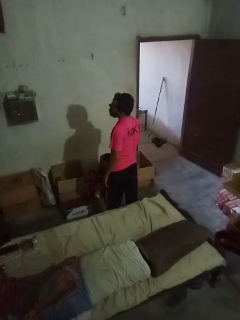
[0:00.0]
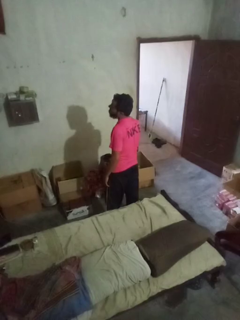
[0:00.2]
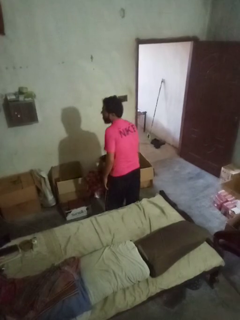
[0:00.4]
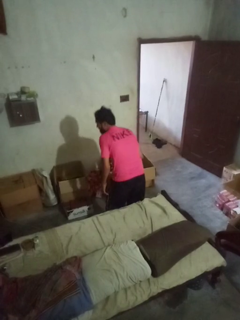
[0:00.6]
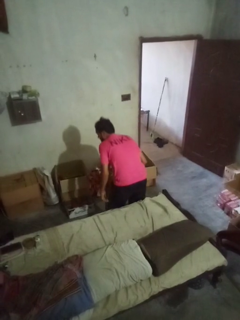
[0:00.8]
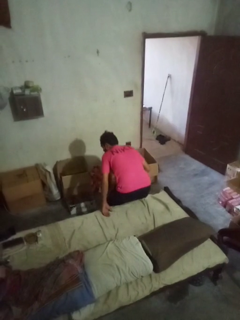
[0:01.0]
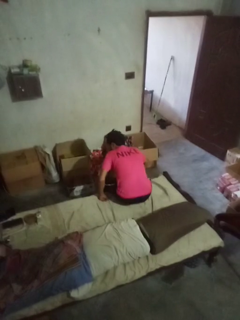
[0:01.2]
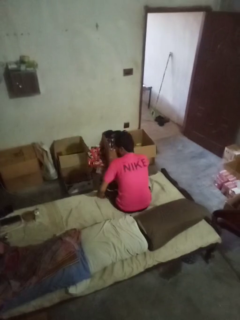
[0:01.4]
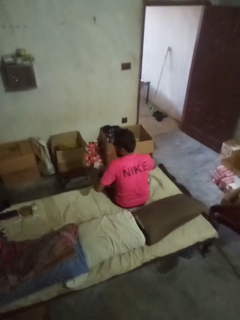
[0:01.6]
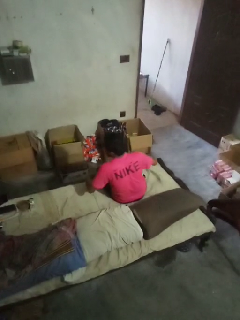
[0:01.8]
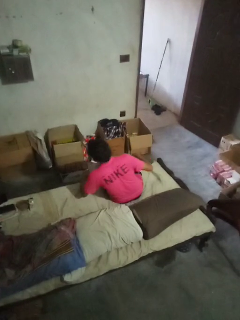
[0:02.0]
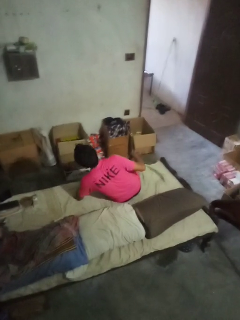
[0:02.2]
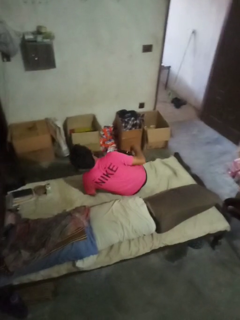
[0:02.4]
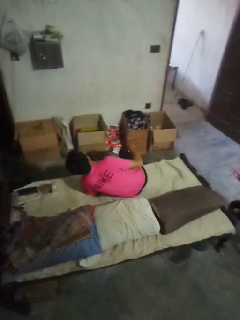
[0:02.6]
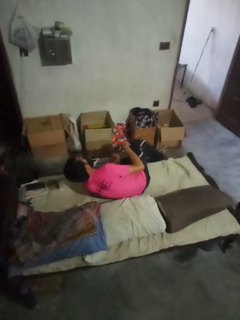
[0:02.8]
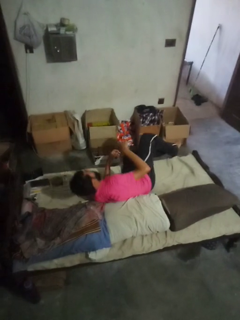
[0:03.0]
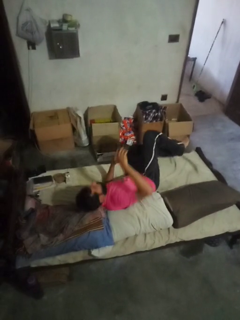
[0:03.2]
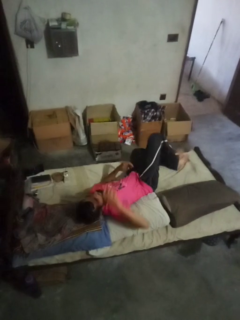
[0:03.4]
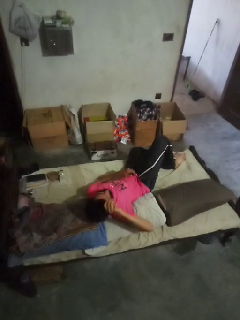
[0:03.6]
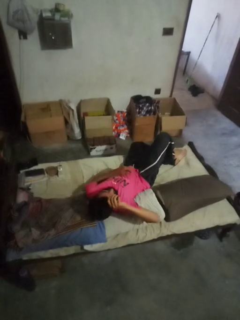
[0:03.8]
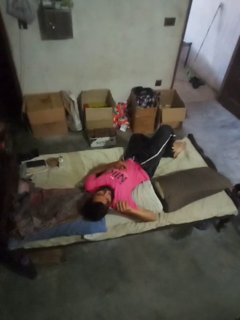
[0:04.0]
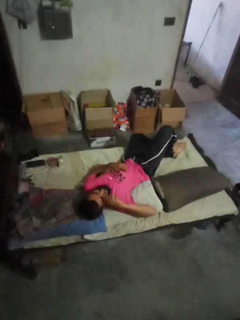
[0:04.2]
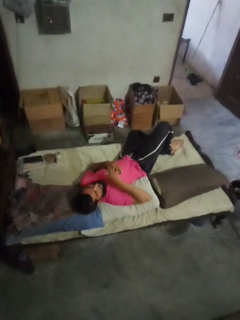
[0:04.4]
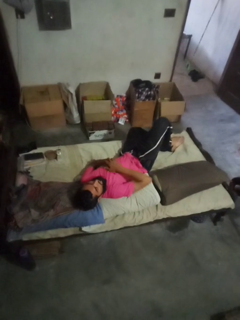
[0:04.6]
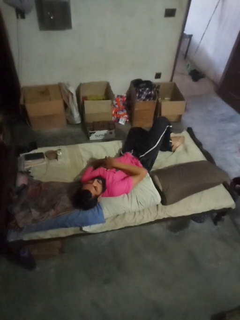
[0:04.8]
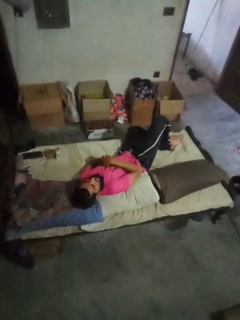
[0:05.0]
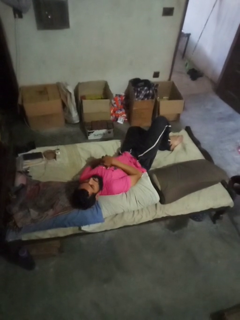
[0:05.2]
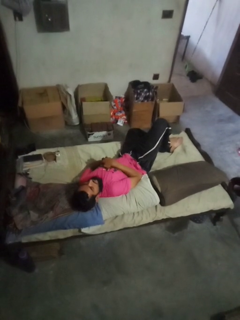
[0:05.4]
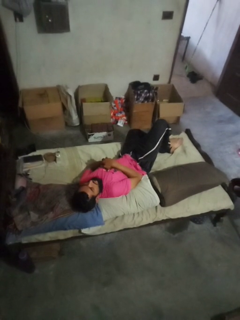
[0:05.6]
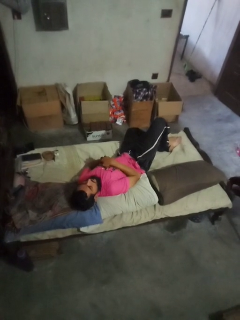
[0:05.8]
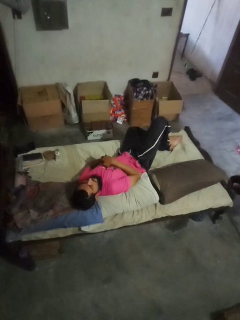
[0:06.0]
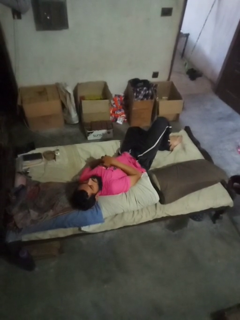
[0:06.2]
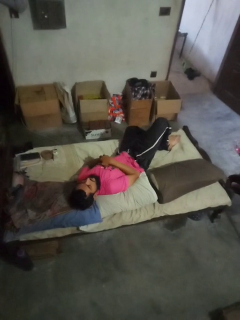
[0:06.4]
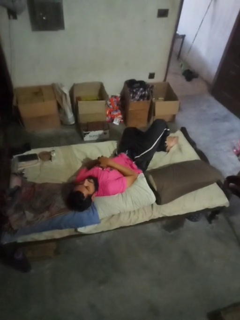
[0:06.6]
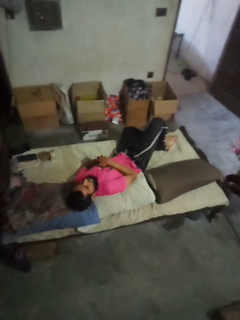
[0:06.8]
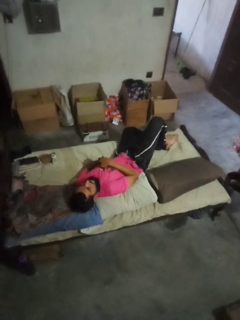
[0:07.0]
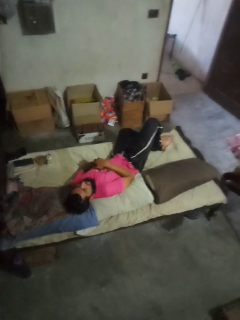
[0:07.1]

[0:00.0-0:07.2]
person lies down on couch

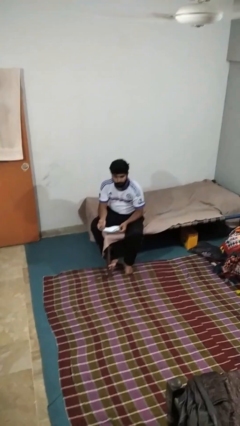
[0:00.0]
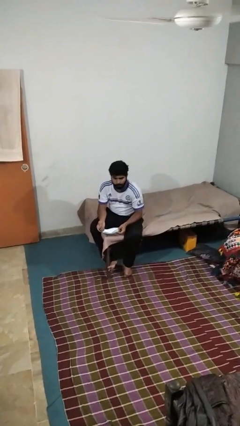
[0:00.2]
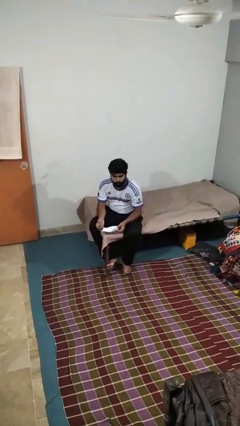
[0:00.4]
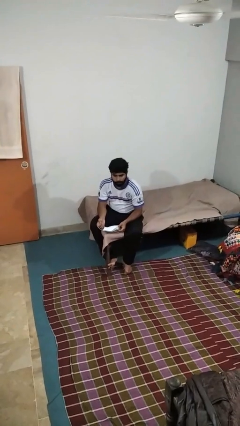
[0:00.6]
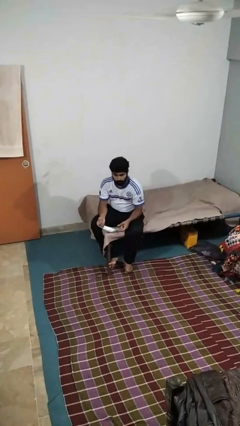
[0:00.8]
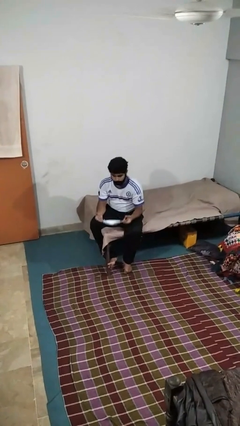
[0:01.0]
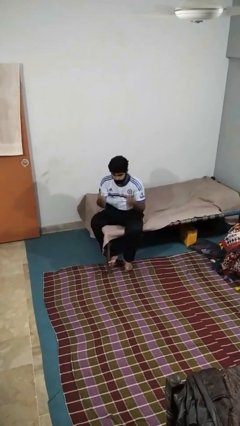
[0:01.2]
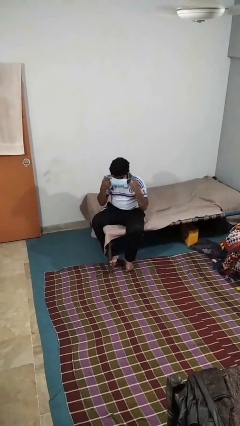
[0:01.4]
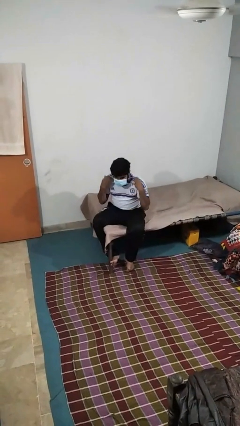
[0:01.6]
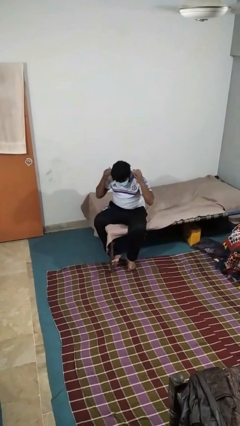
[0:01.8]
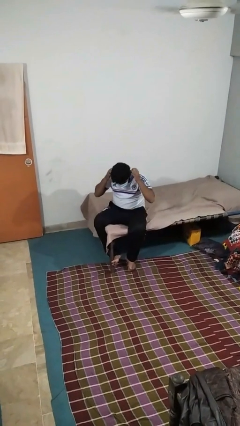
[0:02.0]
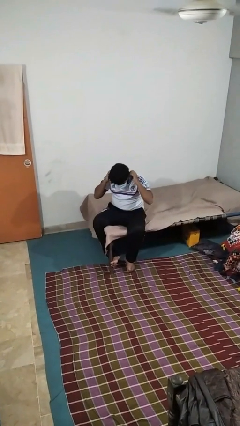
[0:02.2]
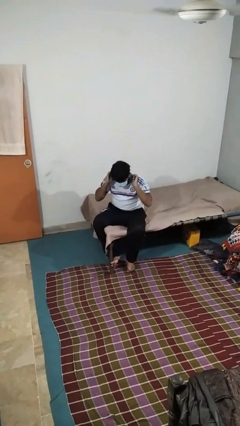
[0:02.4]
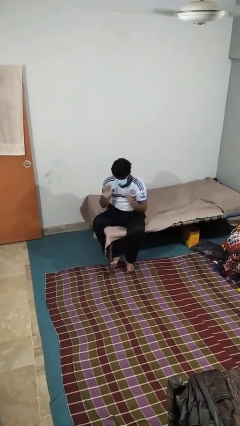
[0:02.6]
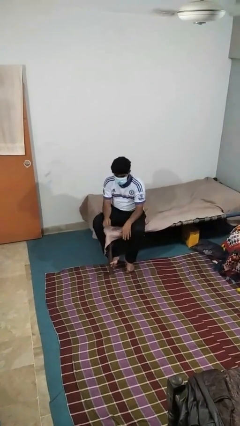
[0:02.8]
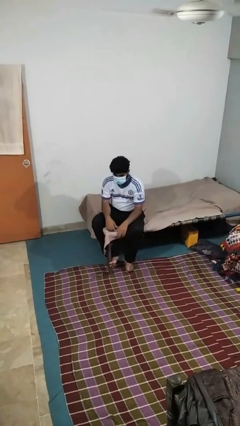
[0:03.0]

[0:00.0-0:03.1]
person puts on facemask

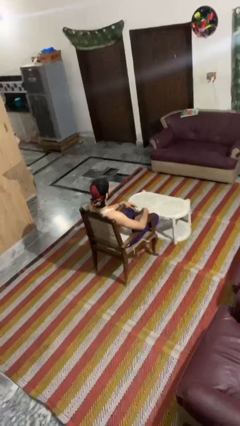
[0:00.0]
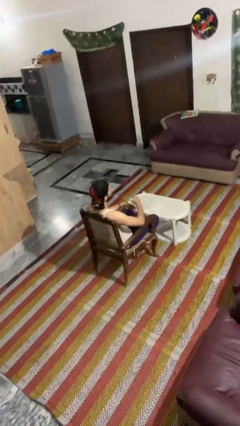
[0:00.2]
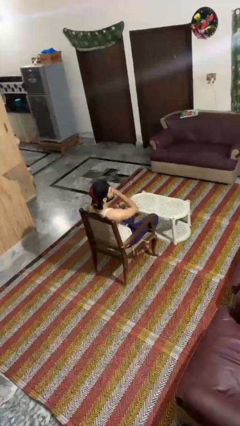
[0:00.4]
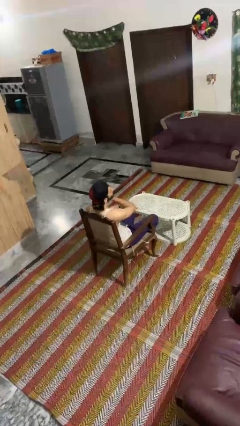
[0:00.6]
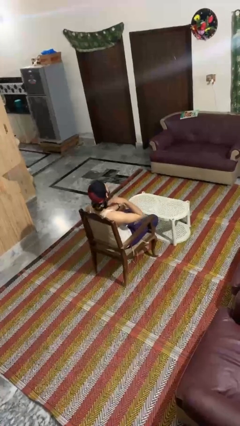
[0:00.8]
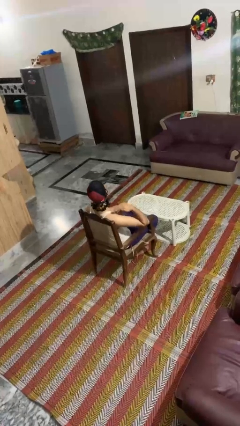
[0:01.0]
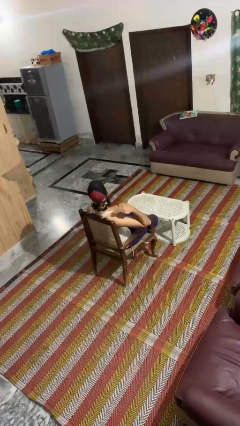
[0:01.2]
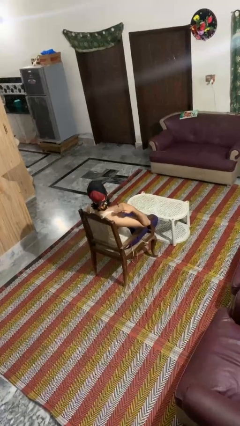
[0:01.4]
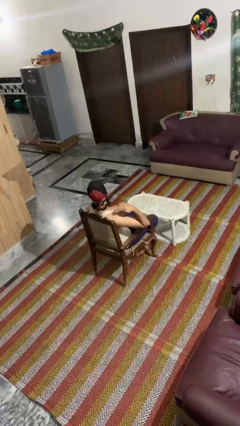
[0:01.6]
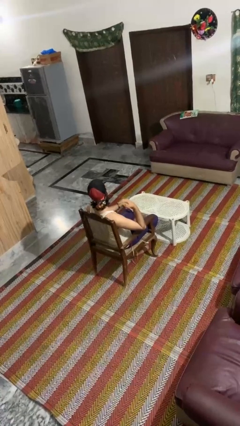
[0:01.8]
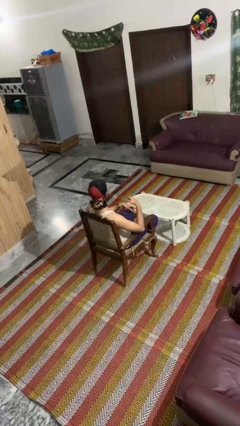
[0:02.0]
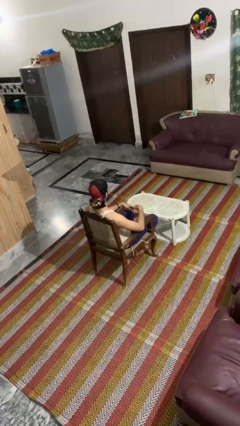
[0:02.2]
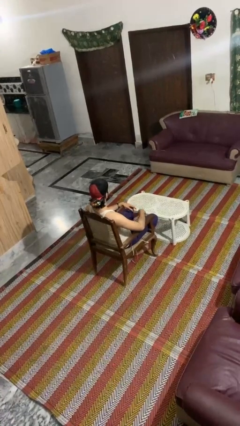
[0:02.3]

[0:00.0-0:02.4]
person gestures cut

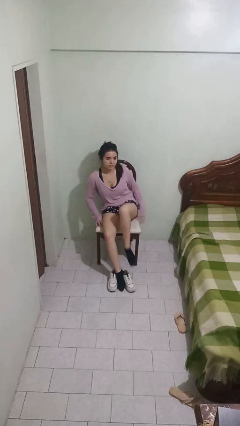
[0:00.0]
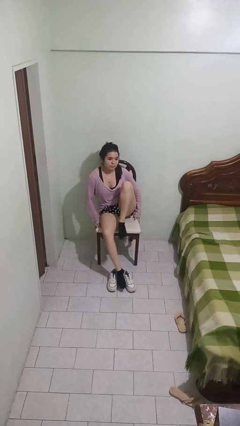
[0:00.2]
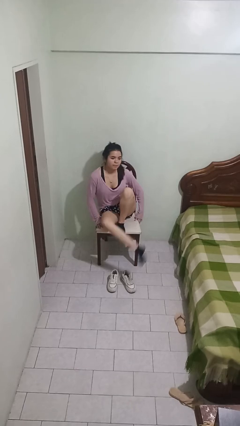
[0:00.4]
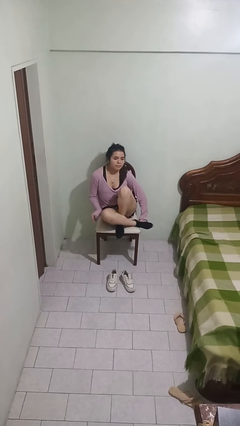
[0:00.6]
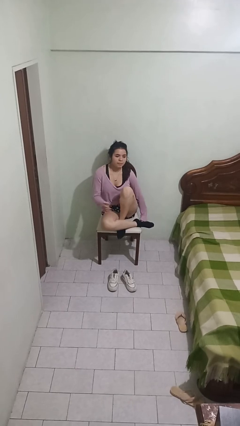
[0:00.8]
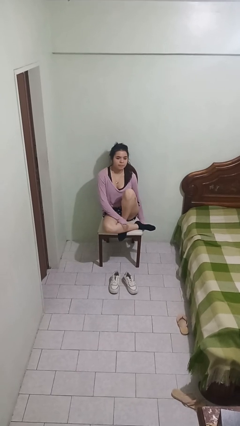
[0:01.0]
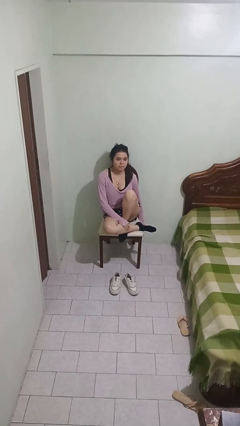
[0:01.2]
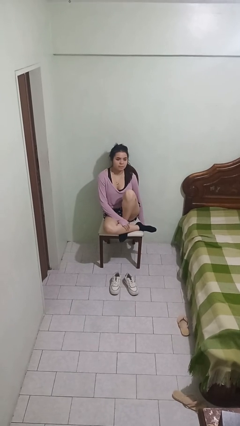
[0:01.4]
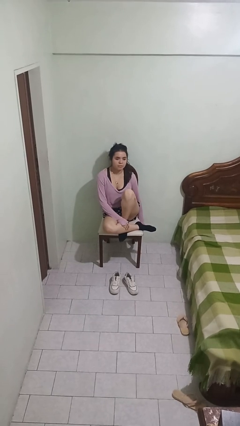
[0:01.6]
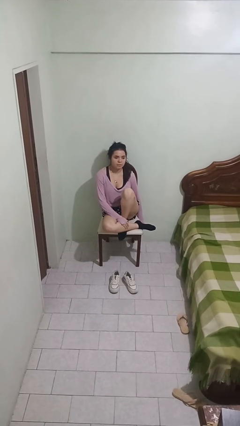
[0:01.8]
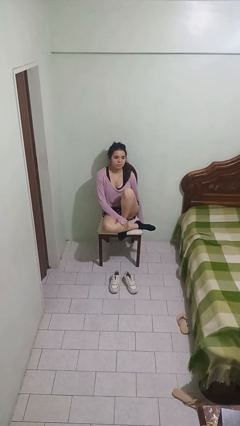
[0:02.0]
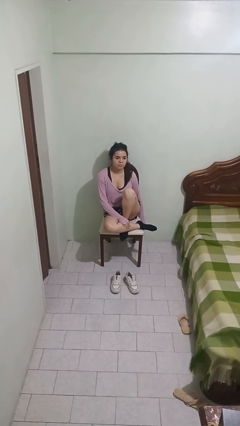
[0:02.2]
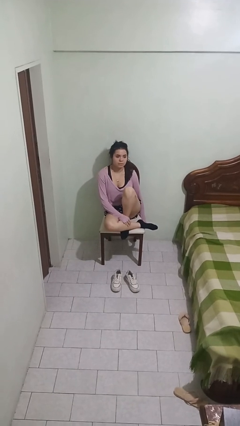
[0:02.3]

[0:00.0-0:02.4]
person puts feet up

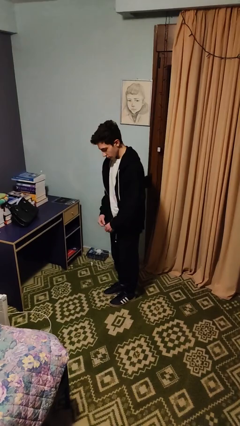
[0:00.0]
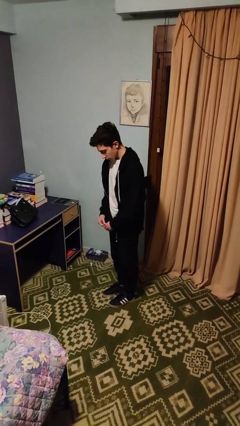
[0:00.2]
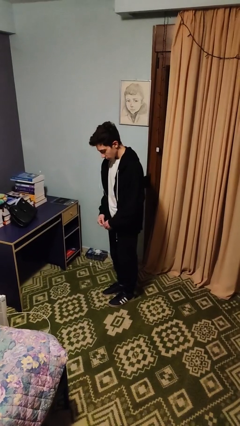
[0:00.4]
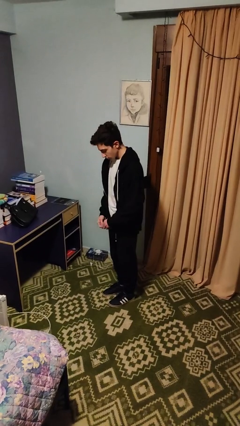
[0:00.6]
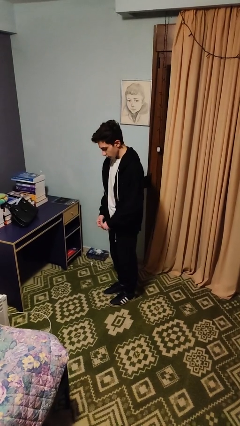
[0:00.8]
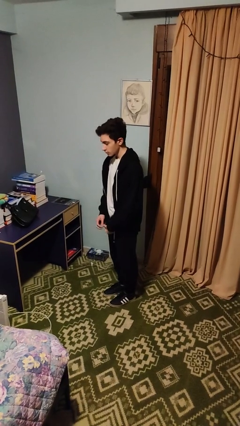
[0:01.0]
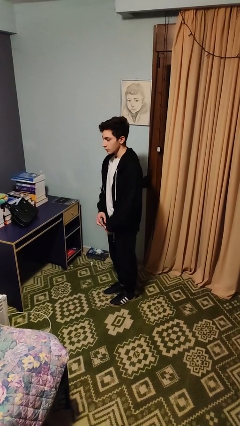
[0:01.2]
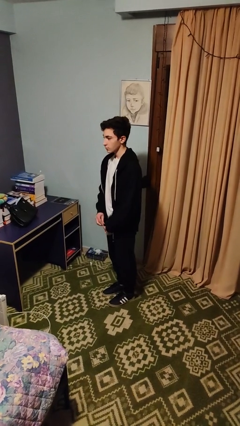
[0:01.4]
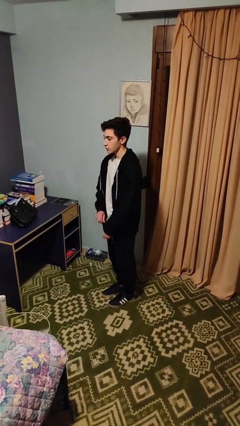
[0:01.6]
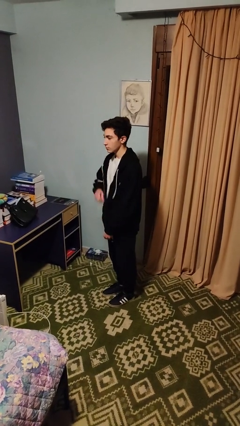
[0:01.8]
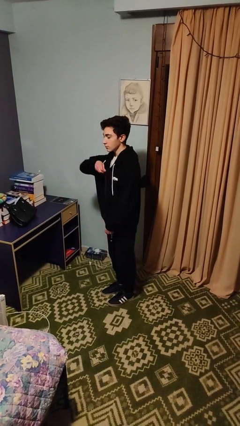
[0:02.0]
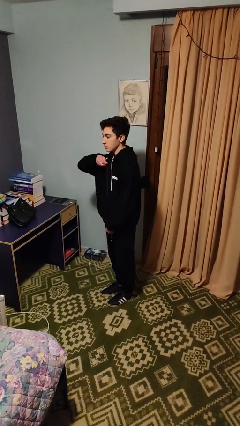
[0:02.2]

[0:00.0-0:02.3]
person zips up jacket

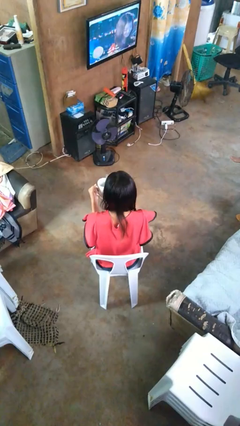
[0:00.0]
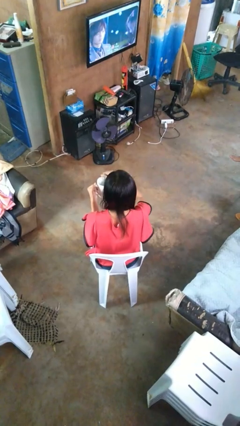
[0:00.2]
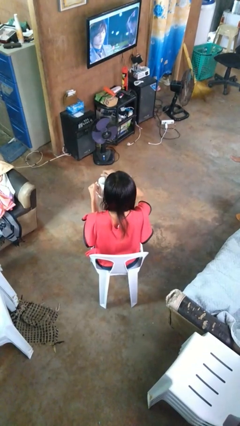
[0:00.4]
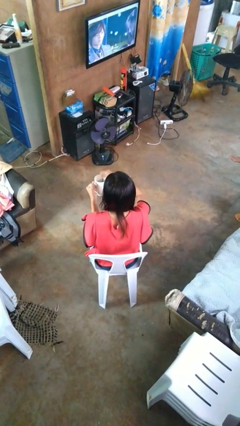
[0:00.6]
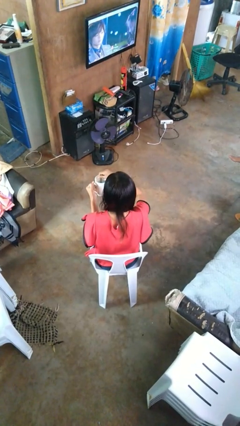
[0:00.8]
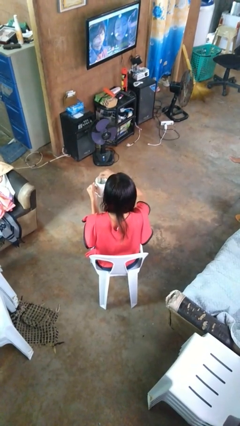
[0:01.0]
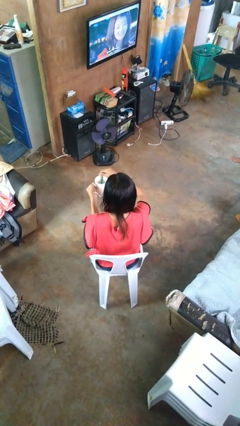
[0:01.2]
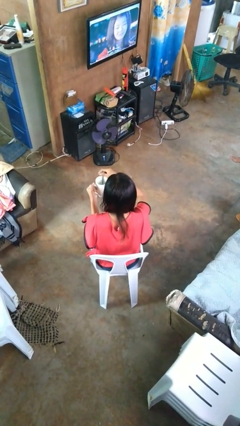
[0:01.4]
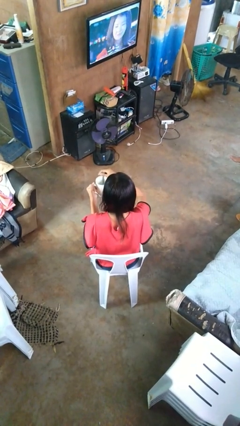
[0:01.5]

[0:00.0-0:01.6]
person stirs mug

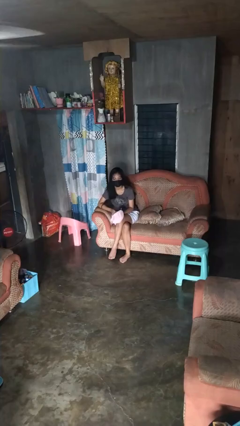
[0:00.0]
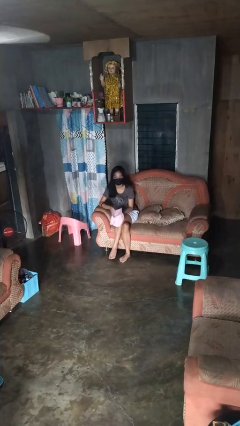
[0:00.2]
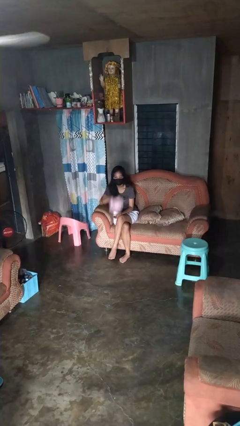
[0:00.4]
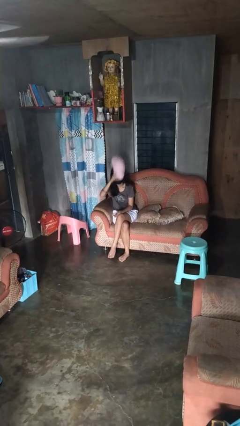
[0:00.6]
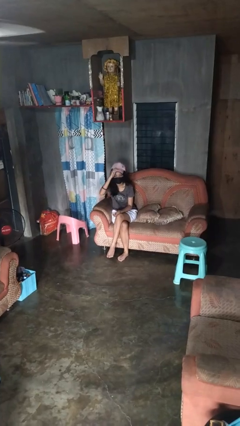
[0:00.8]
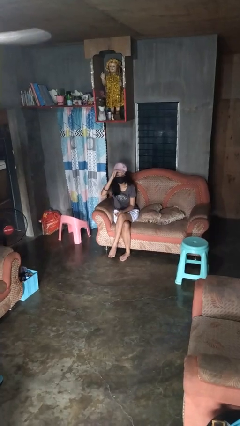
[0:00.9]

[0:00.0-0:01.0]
person puts on hat
